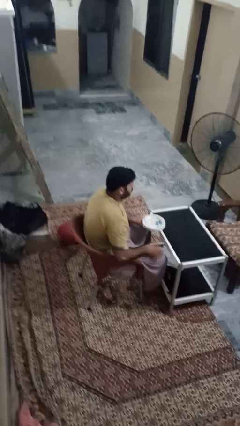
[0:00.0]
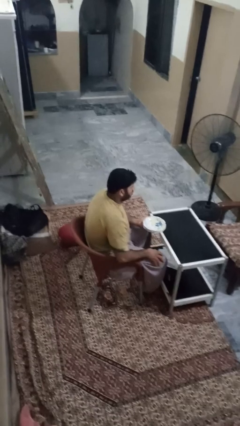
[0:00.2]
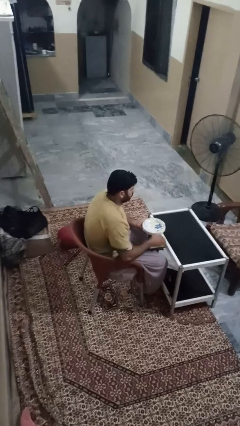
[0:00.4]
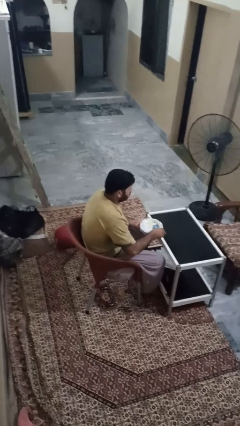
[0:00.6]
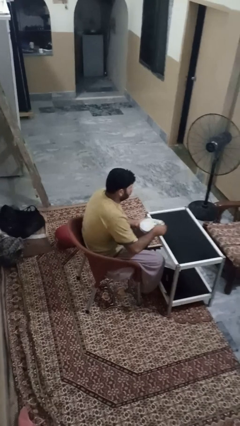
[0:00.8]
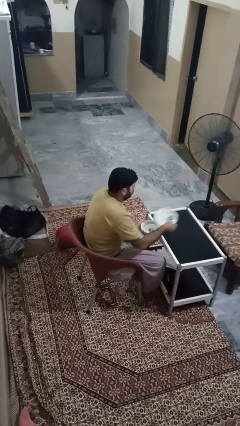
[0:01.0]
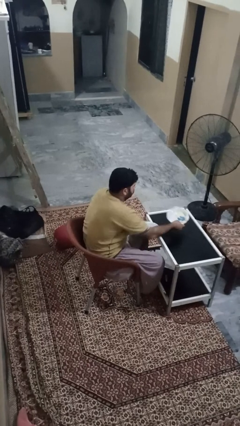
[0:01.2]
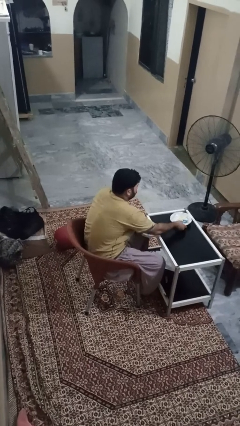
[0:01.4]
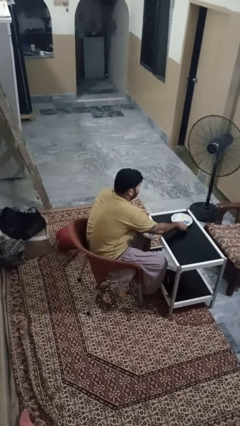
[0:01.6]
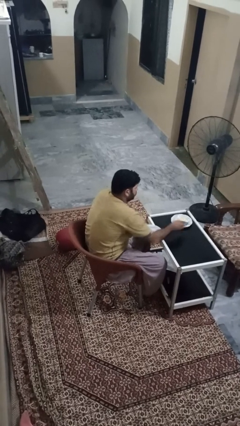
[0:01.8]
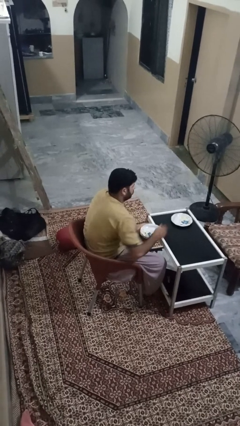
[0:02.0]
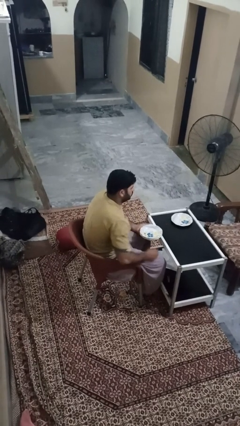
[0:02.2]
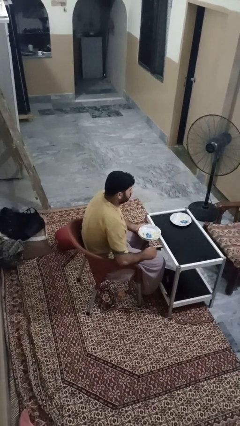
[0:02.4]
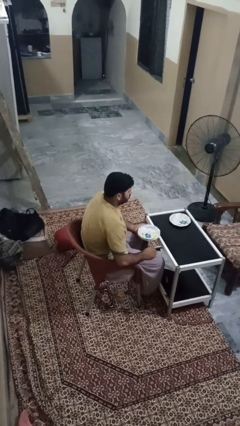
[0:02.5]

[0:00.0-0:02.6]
person sets table

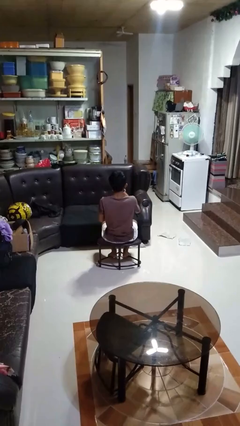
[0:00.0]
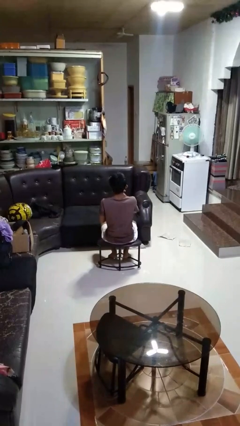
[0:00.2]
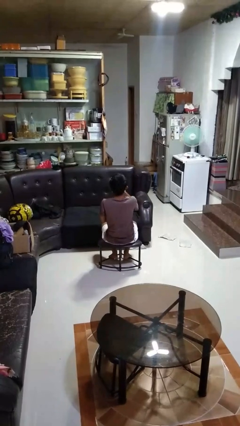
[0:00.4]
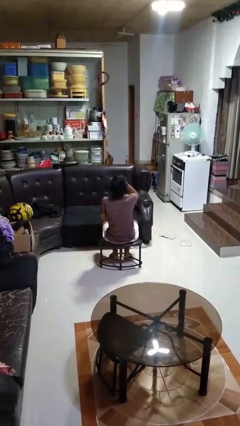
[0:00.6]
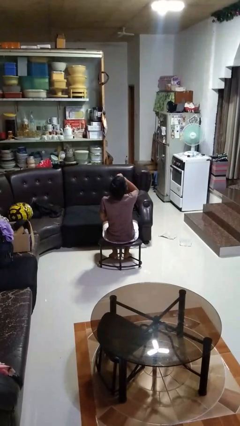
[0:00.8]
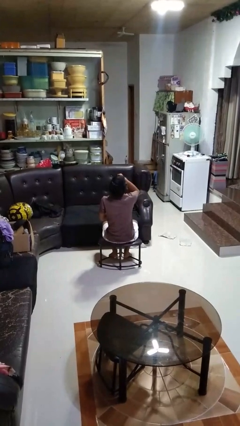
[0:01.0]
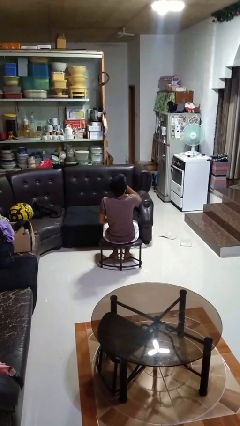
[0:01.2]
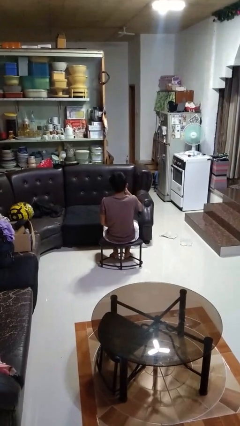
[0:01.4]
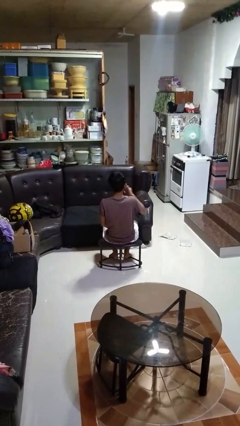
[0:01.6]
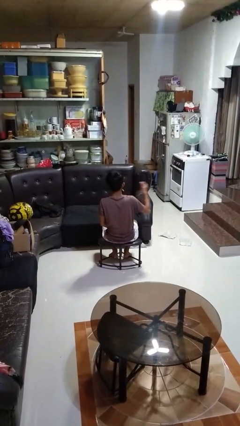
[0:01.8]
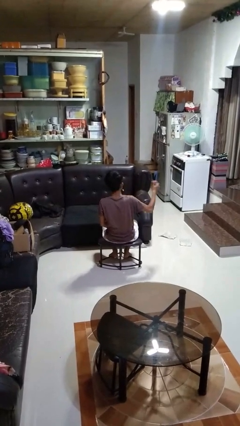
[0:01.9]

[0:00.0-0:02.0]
person drinks from beverage can

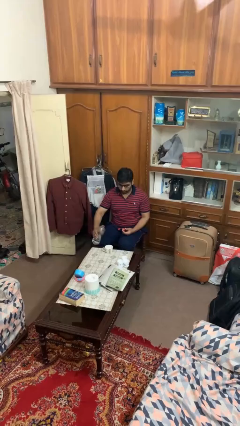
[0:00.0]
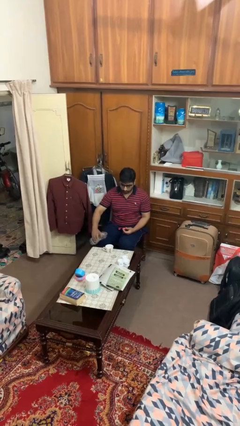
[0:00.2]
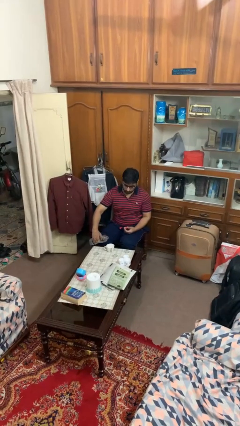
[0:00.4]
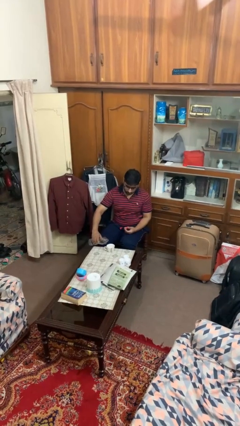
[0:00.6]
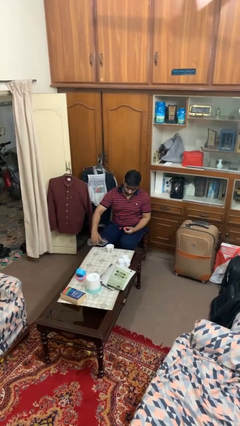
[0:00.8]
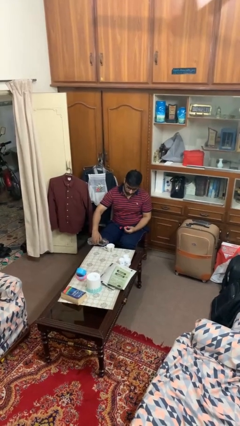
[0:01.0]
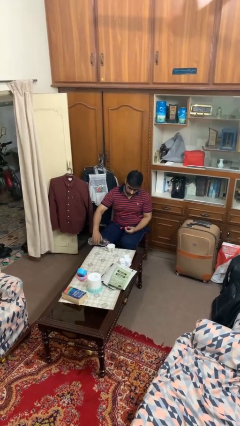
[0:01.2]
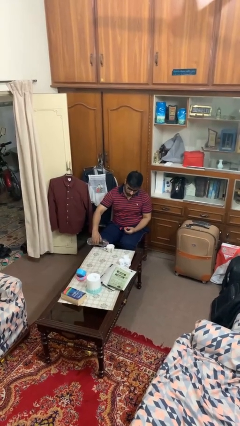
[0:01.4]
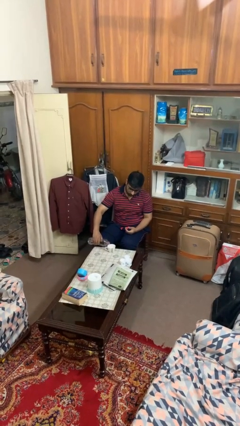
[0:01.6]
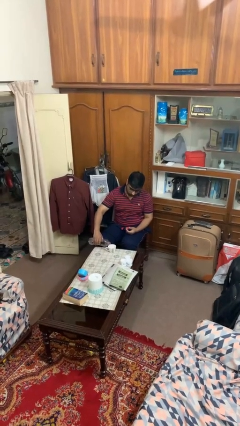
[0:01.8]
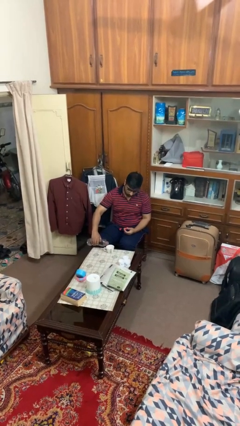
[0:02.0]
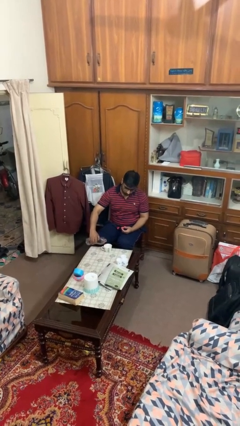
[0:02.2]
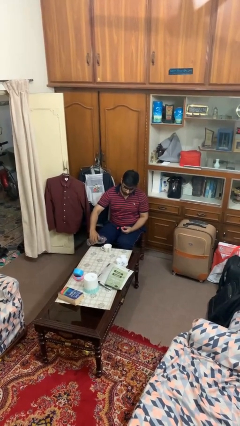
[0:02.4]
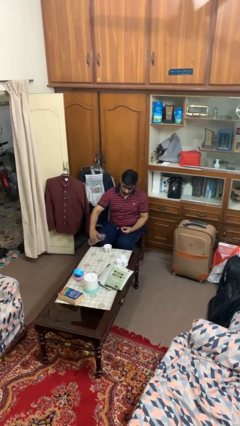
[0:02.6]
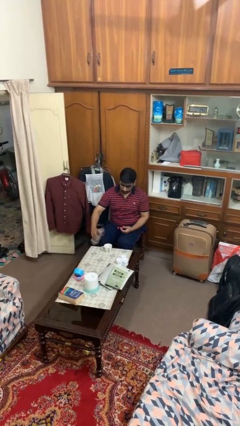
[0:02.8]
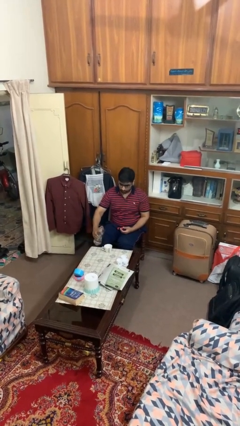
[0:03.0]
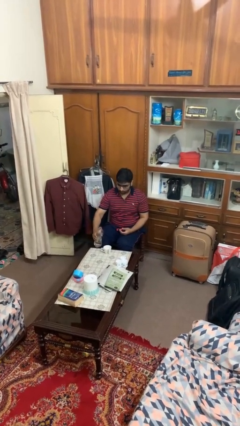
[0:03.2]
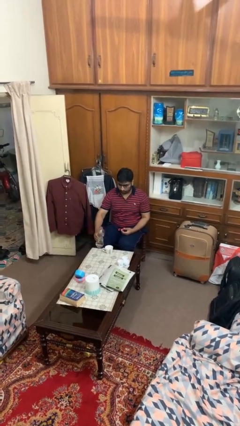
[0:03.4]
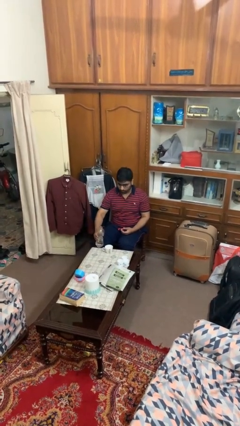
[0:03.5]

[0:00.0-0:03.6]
person pours liquid into cup

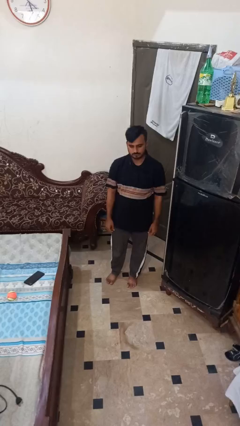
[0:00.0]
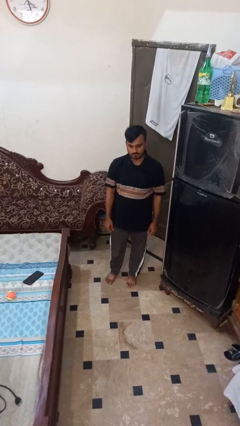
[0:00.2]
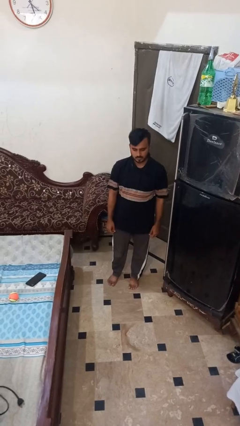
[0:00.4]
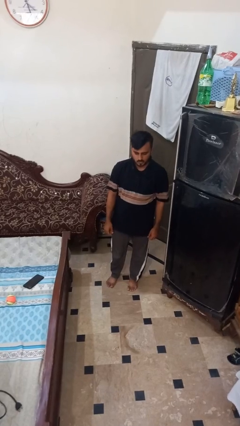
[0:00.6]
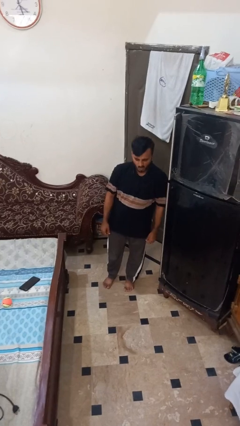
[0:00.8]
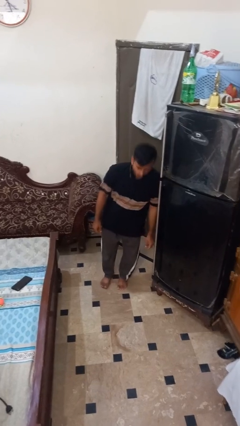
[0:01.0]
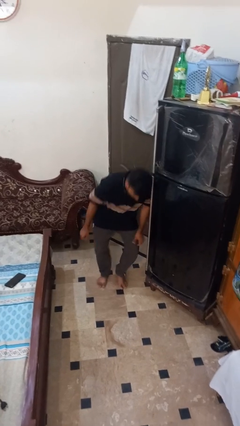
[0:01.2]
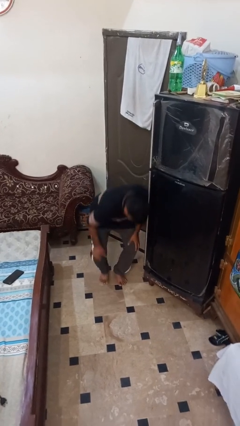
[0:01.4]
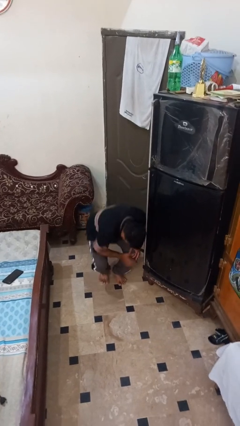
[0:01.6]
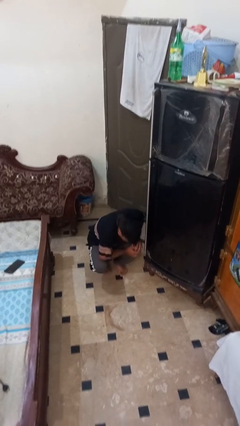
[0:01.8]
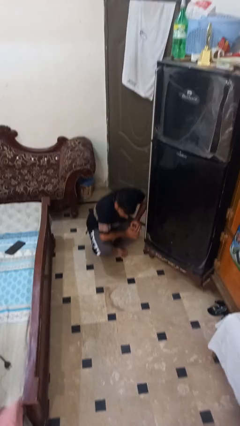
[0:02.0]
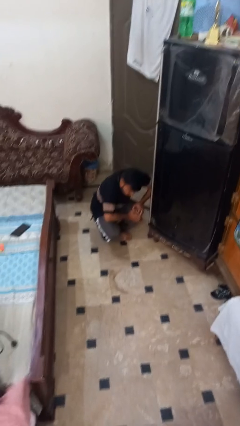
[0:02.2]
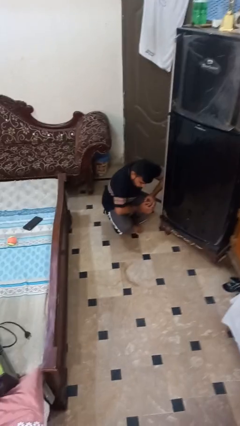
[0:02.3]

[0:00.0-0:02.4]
person trips on object on floor

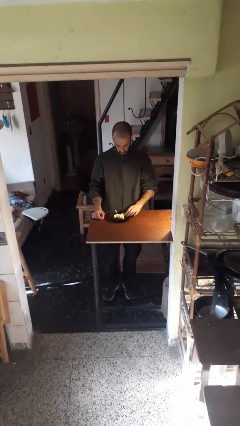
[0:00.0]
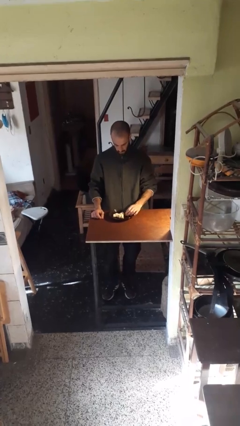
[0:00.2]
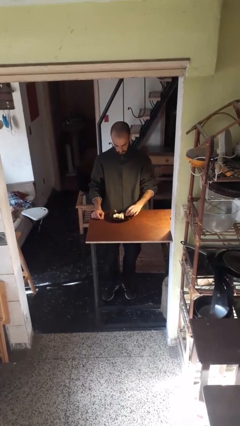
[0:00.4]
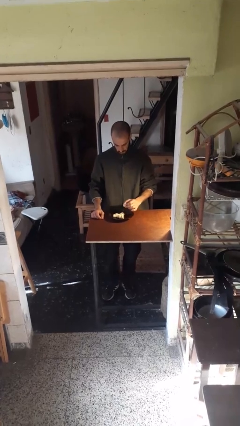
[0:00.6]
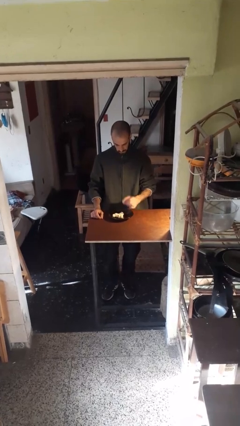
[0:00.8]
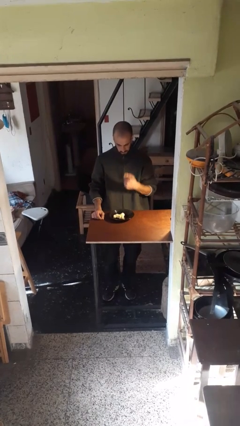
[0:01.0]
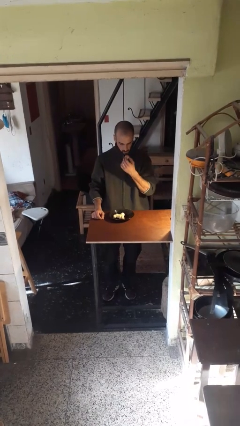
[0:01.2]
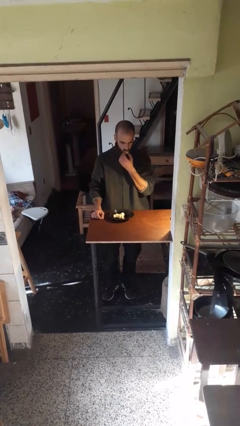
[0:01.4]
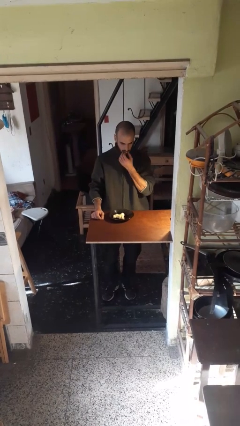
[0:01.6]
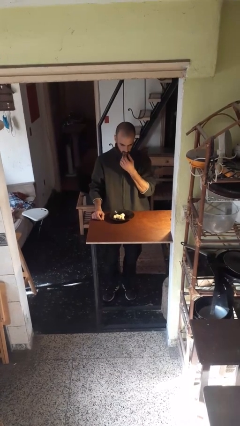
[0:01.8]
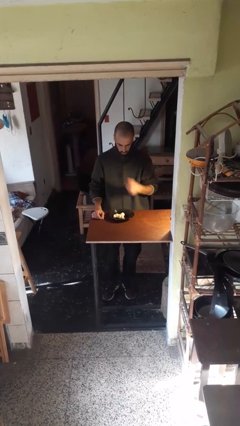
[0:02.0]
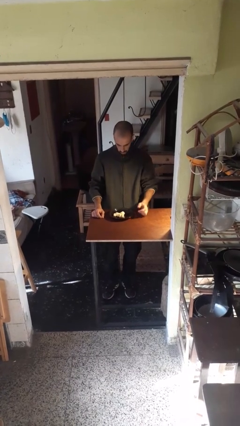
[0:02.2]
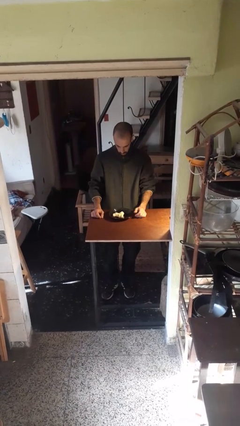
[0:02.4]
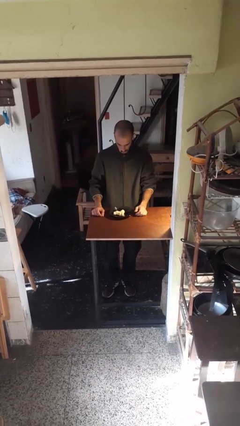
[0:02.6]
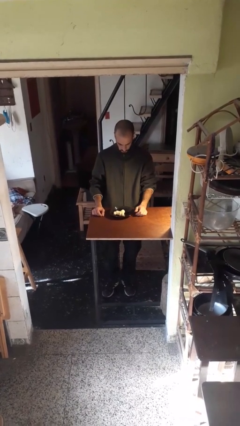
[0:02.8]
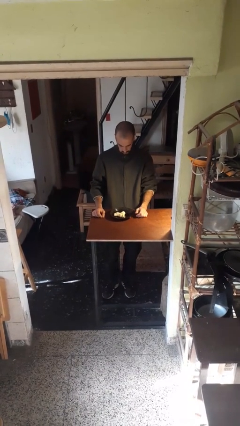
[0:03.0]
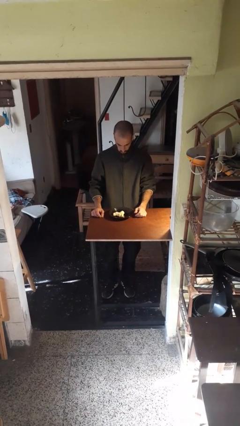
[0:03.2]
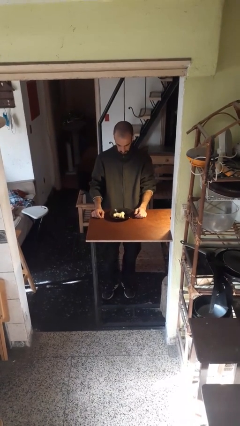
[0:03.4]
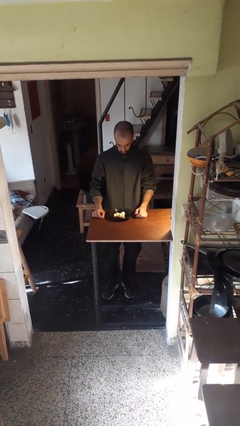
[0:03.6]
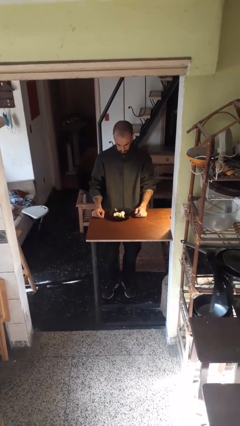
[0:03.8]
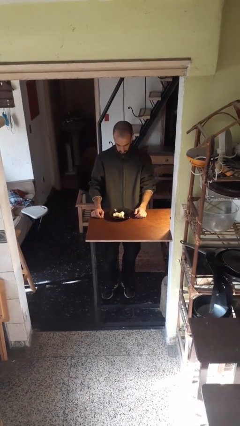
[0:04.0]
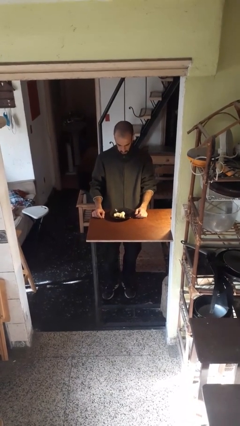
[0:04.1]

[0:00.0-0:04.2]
person eats with hands

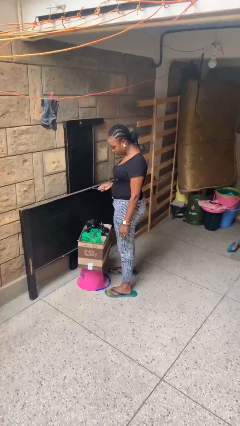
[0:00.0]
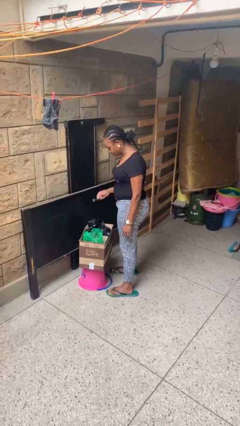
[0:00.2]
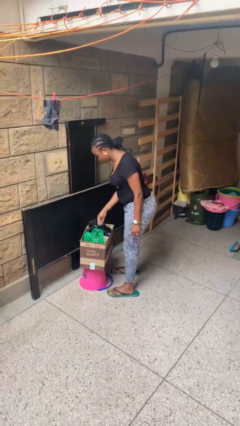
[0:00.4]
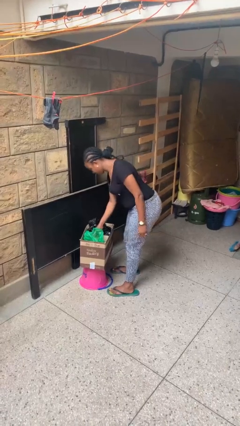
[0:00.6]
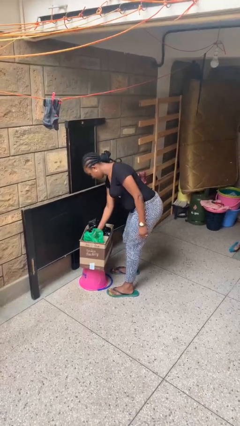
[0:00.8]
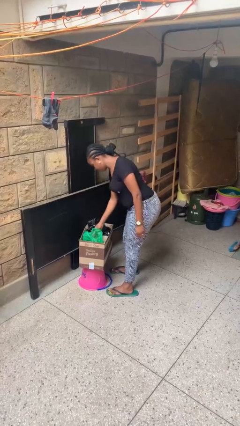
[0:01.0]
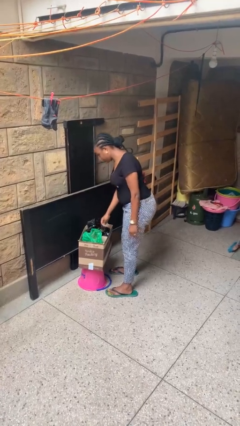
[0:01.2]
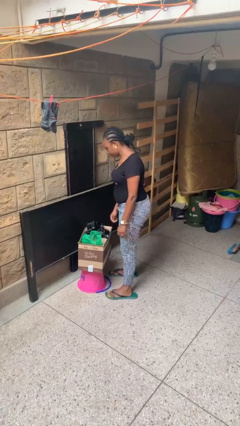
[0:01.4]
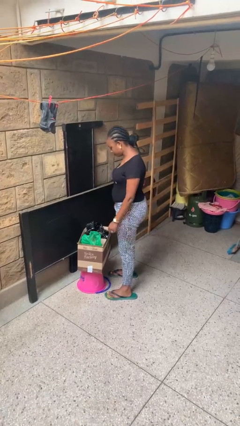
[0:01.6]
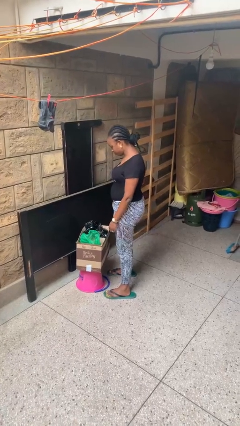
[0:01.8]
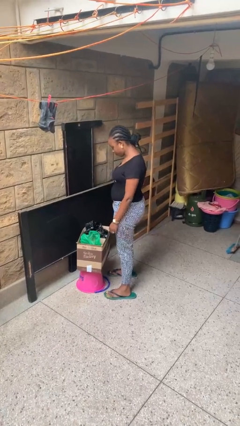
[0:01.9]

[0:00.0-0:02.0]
person puts object into box

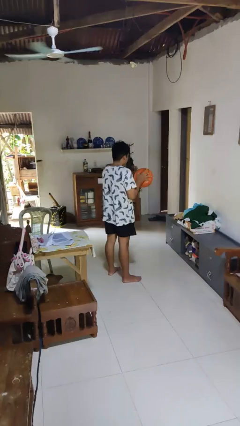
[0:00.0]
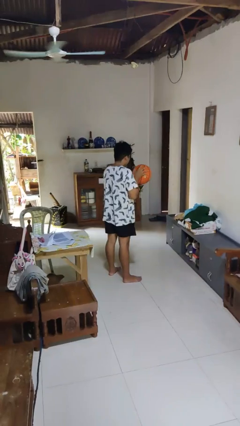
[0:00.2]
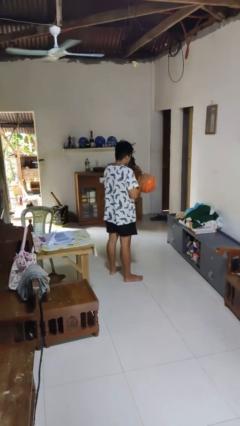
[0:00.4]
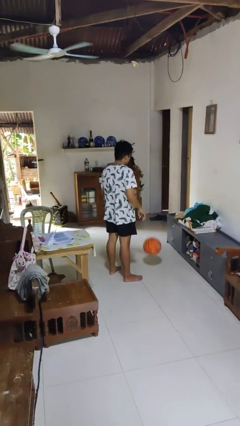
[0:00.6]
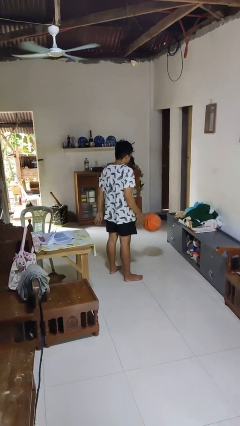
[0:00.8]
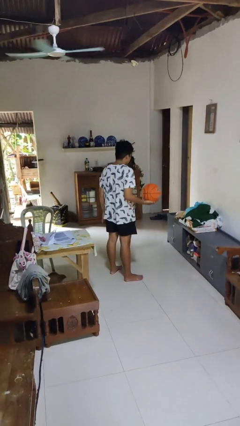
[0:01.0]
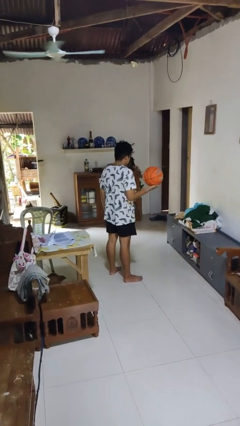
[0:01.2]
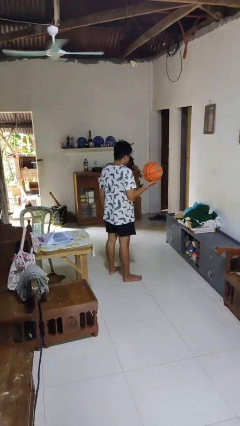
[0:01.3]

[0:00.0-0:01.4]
person bounces ball on floor
